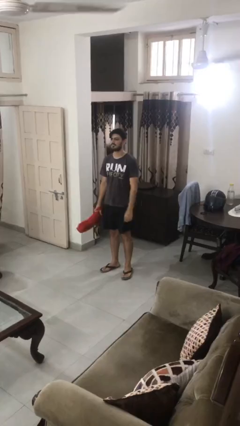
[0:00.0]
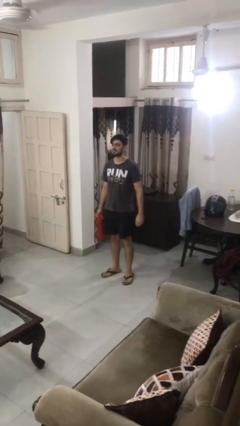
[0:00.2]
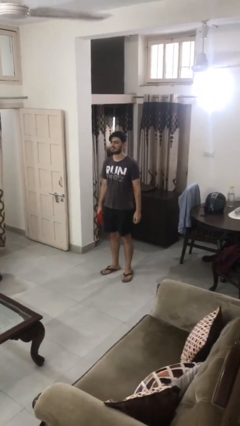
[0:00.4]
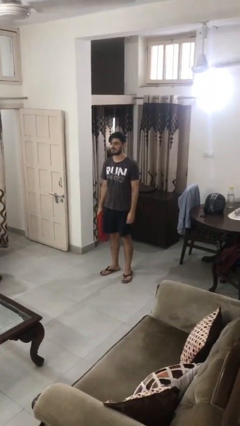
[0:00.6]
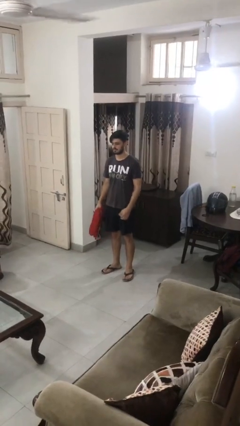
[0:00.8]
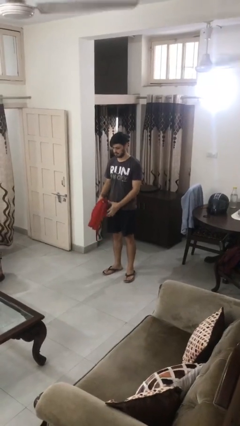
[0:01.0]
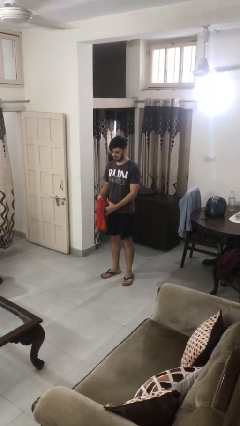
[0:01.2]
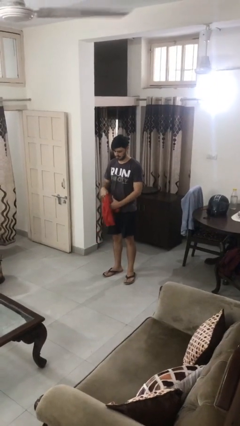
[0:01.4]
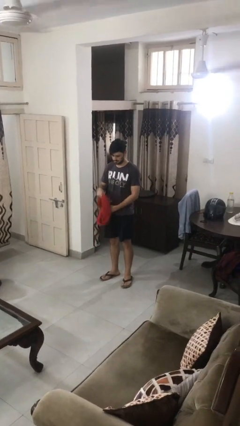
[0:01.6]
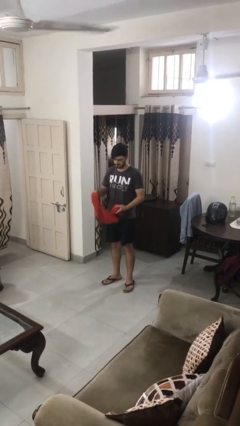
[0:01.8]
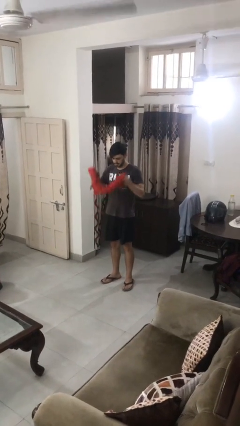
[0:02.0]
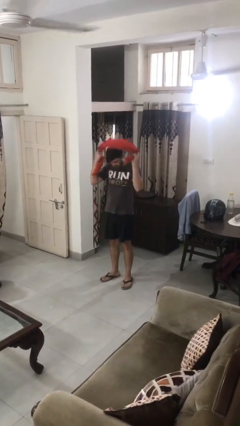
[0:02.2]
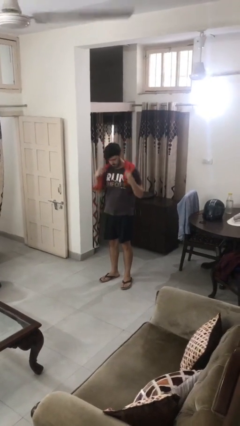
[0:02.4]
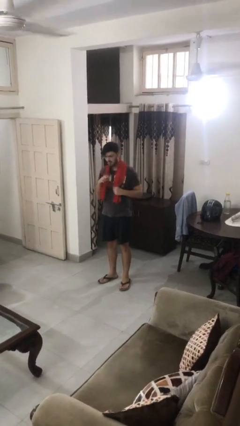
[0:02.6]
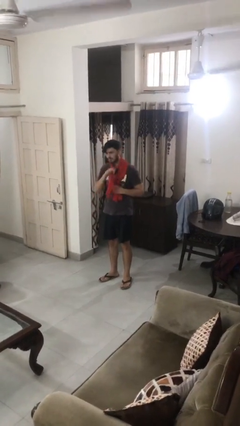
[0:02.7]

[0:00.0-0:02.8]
person puts on scarf

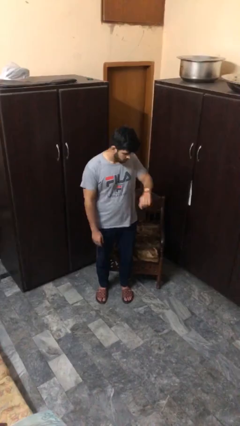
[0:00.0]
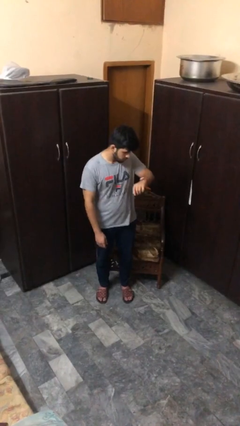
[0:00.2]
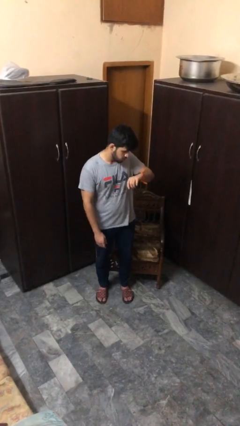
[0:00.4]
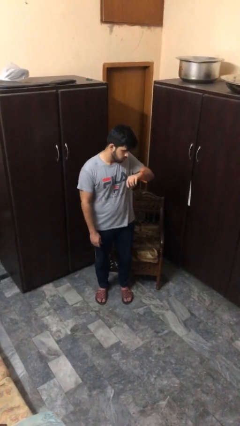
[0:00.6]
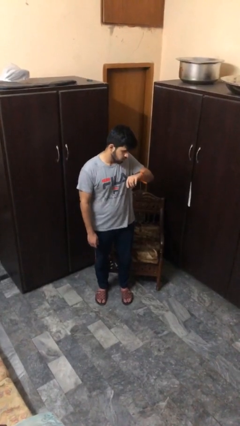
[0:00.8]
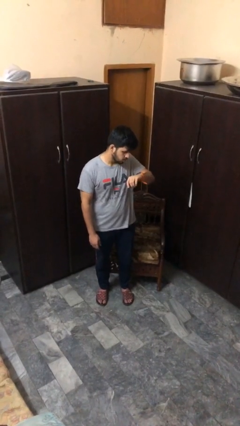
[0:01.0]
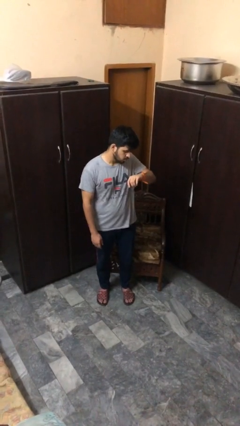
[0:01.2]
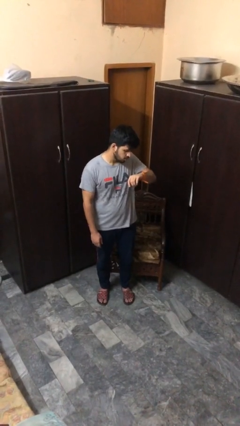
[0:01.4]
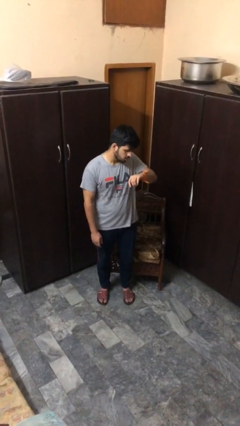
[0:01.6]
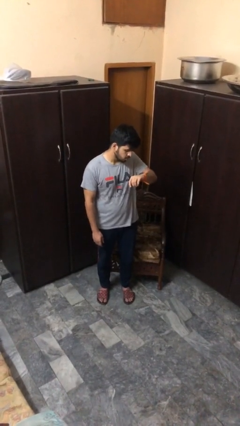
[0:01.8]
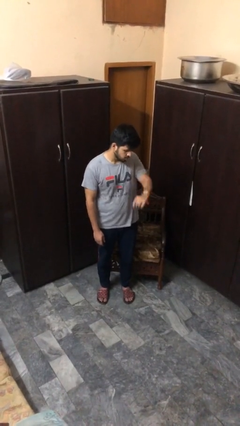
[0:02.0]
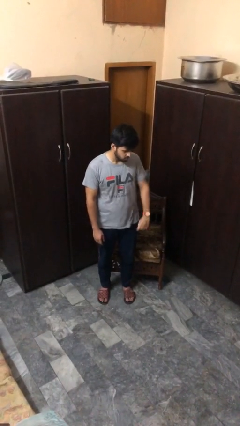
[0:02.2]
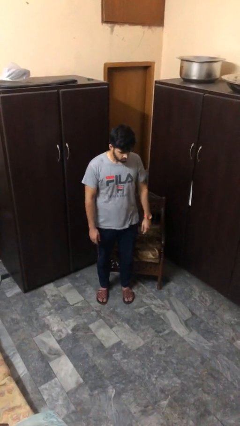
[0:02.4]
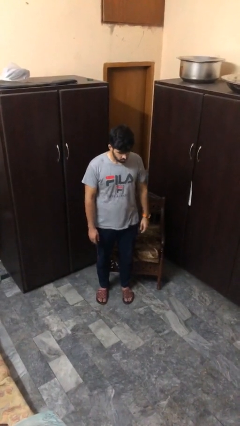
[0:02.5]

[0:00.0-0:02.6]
person looks at wristwatch

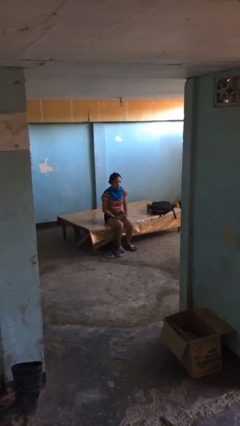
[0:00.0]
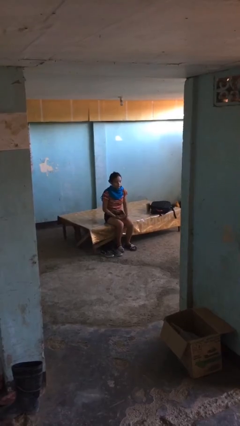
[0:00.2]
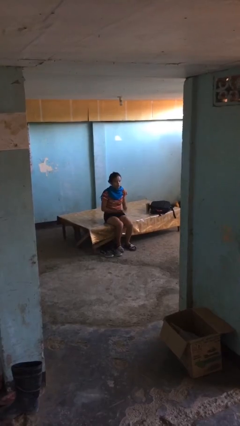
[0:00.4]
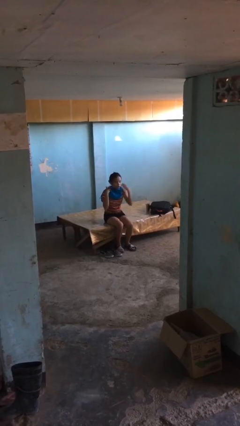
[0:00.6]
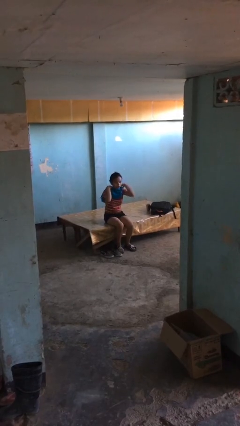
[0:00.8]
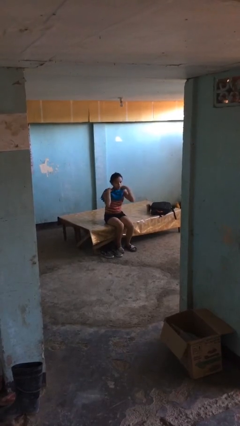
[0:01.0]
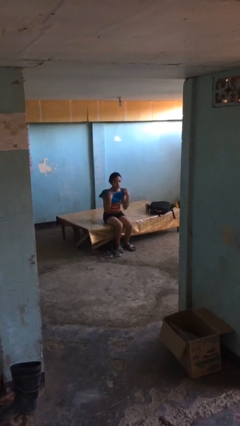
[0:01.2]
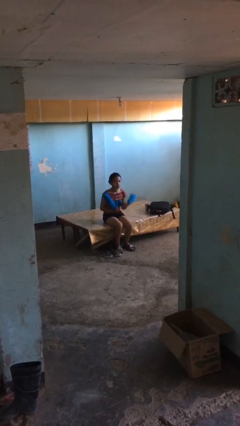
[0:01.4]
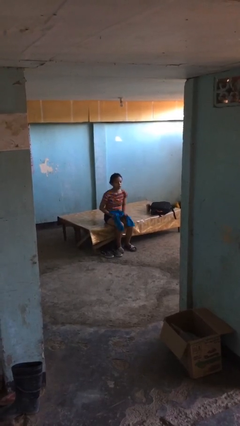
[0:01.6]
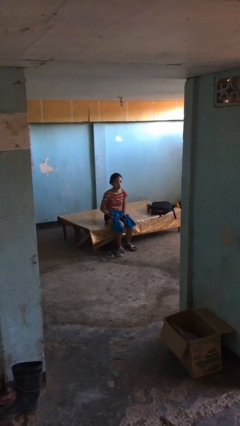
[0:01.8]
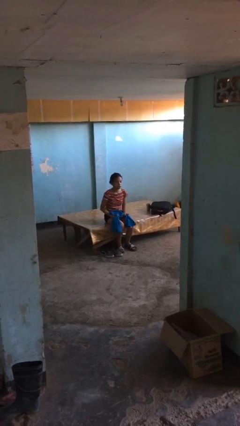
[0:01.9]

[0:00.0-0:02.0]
person takes off scarf

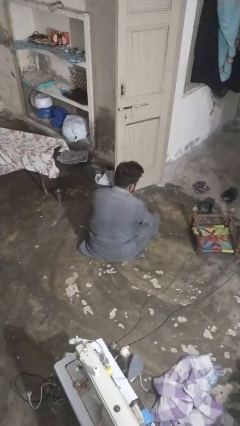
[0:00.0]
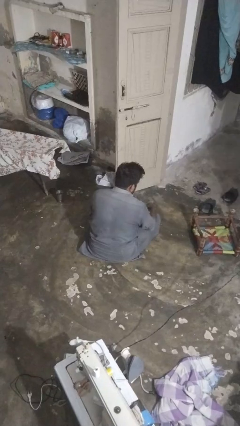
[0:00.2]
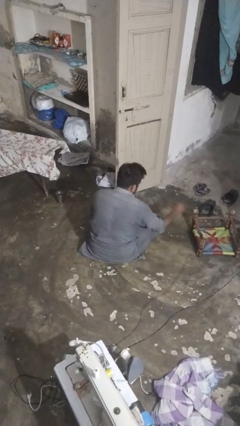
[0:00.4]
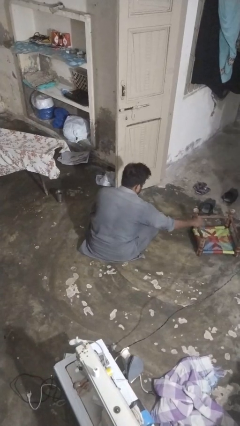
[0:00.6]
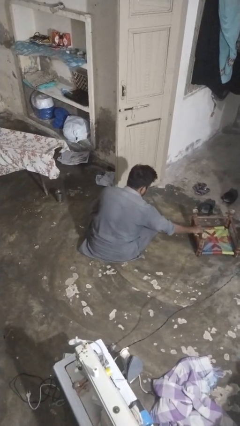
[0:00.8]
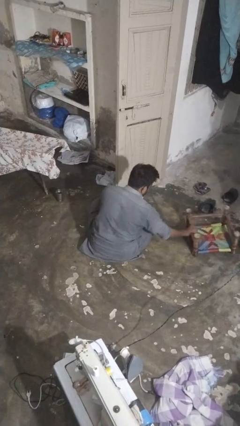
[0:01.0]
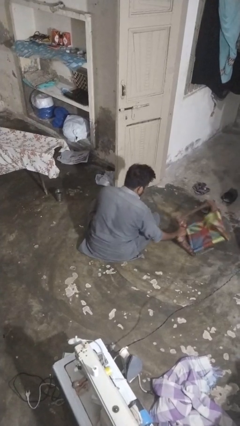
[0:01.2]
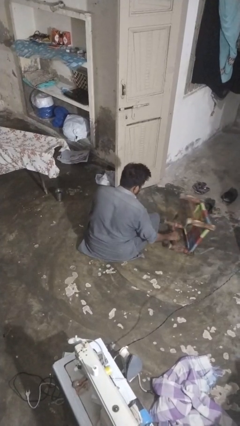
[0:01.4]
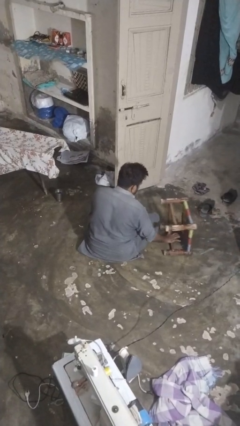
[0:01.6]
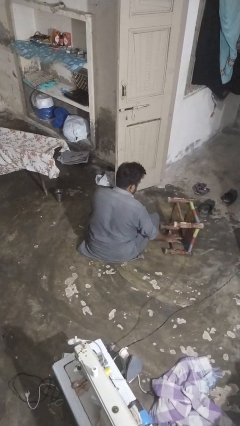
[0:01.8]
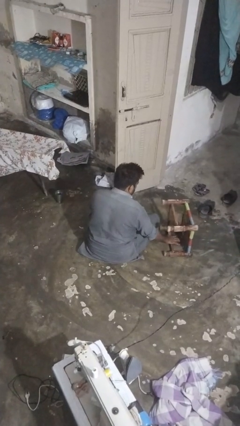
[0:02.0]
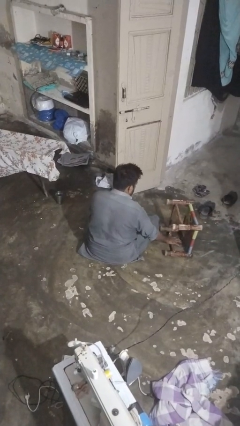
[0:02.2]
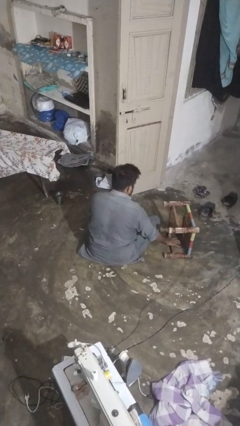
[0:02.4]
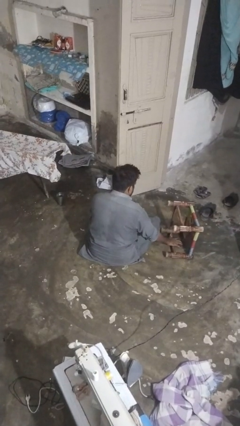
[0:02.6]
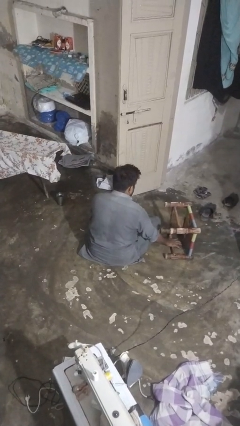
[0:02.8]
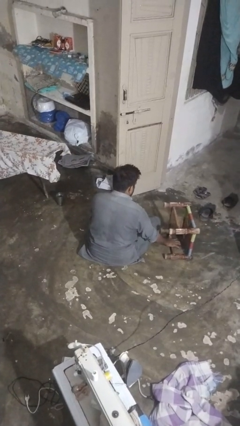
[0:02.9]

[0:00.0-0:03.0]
person sets upright furniture

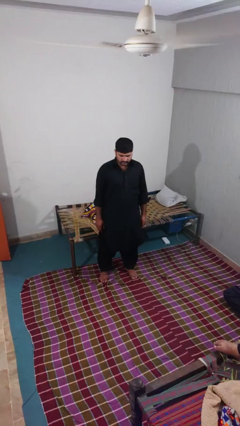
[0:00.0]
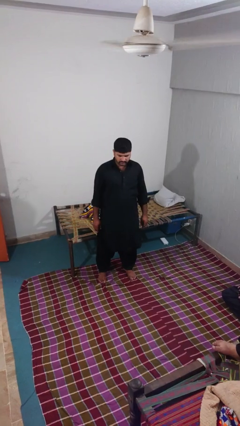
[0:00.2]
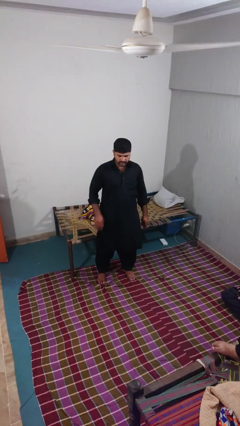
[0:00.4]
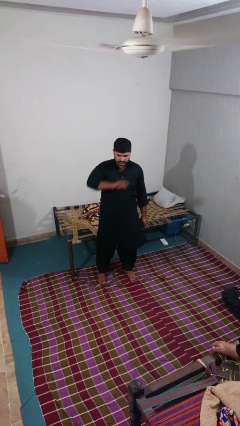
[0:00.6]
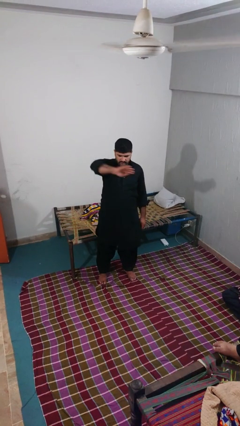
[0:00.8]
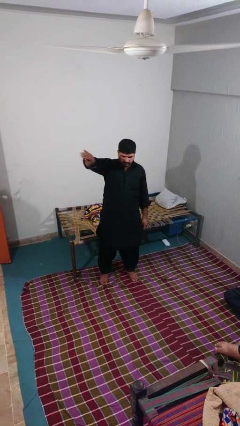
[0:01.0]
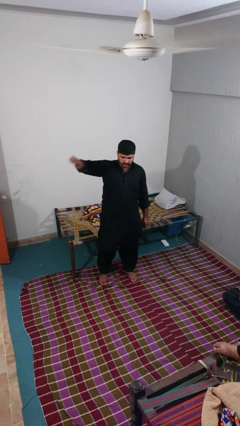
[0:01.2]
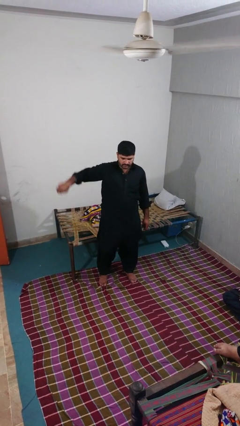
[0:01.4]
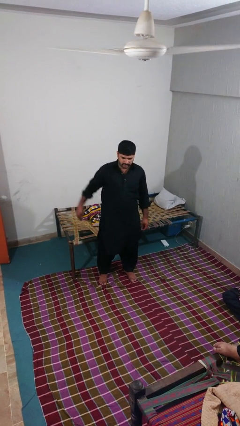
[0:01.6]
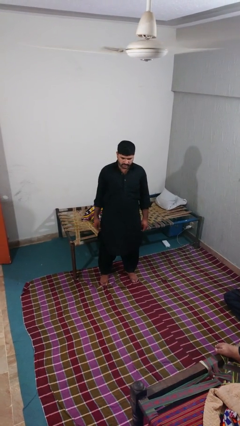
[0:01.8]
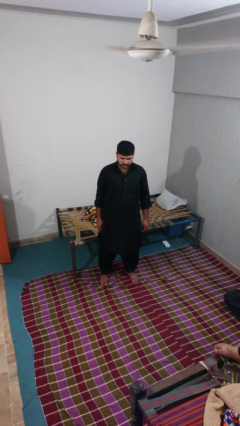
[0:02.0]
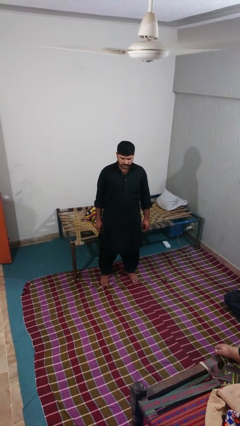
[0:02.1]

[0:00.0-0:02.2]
person gestures swipe right

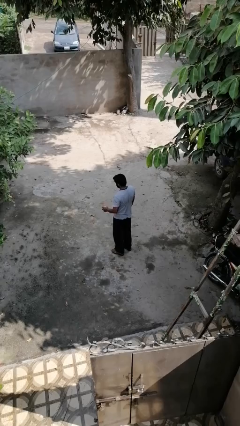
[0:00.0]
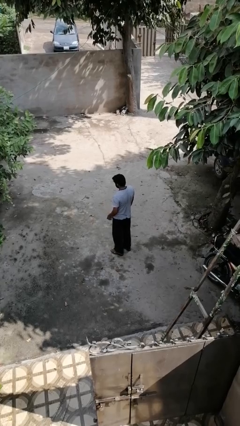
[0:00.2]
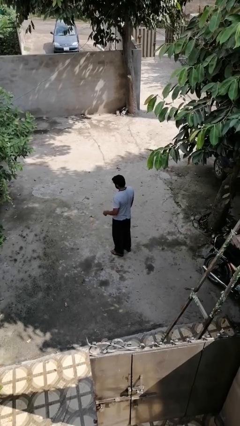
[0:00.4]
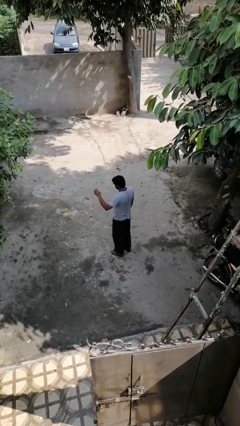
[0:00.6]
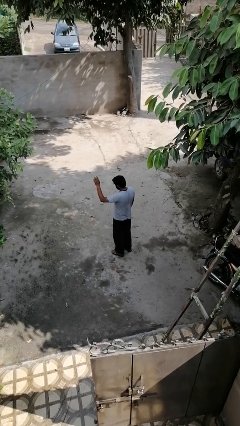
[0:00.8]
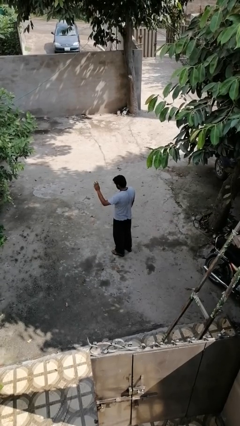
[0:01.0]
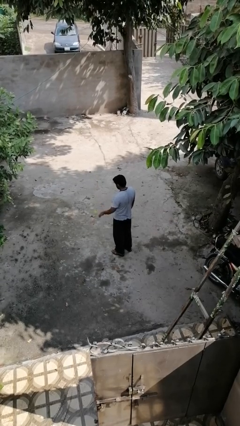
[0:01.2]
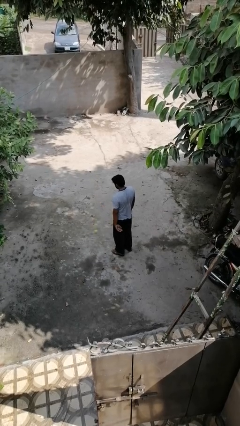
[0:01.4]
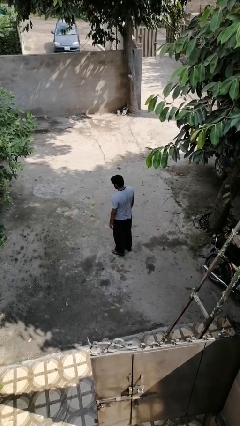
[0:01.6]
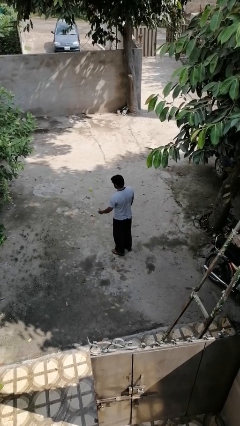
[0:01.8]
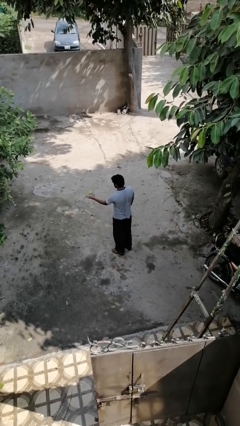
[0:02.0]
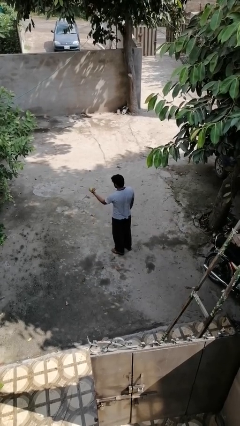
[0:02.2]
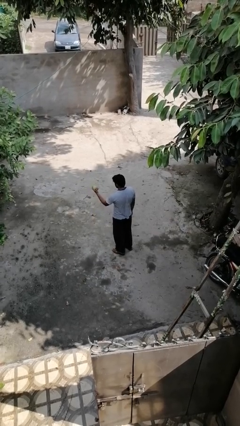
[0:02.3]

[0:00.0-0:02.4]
person bounces ball on floor

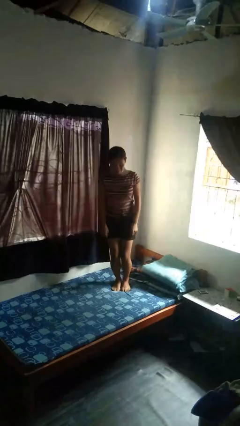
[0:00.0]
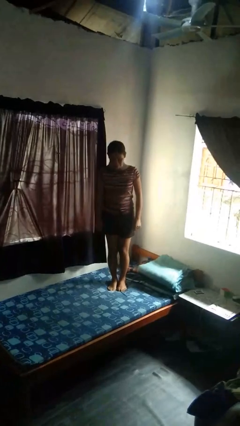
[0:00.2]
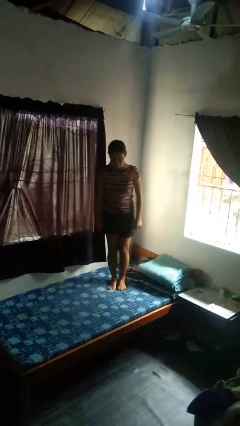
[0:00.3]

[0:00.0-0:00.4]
person jumps on bed

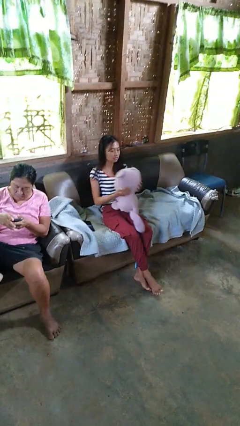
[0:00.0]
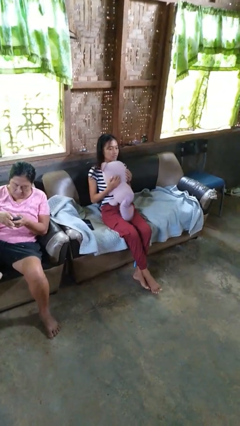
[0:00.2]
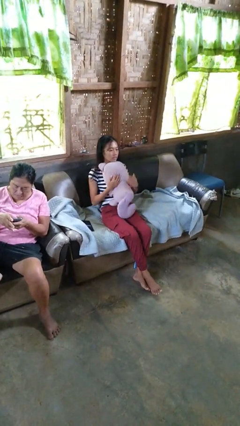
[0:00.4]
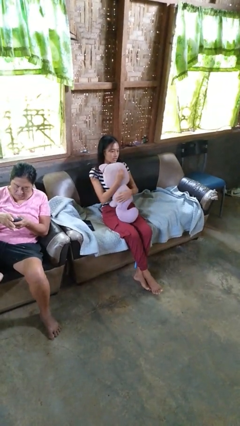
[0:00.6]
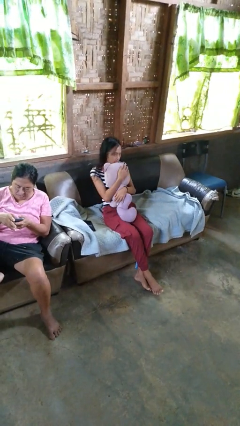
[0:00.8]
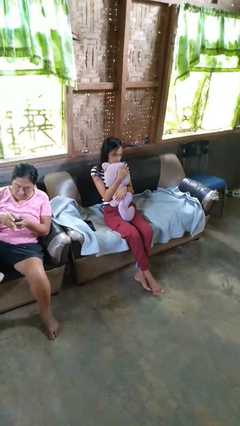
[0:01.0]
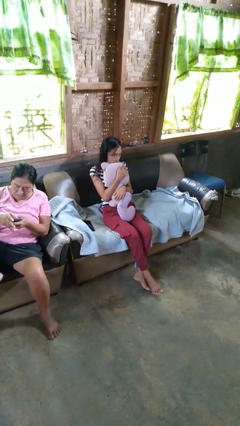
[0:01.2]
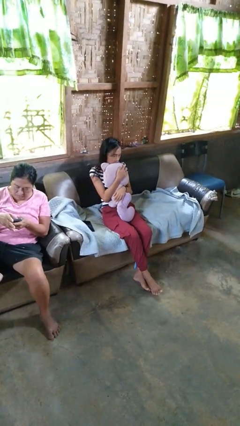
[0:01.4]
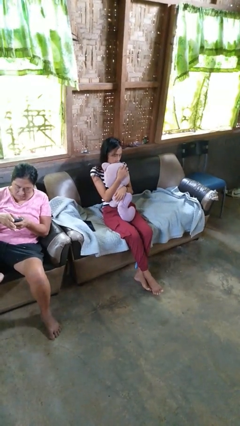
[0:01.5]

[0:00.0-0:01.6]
person hugs stuffed animal
